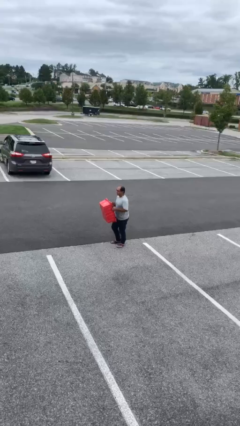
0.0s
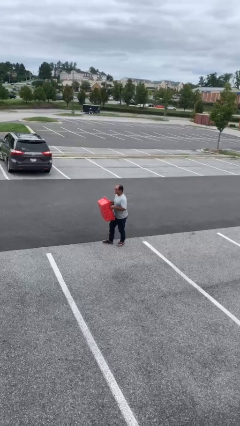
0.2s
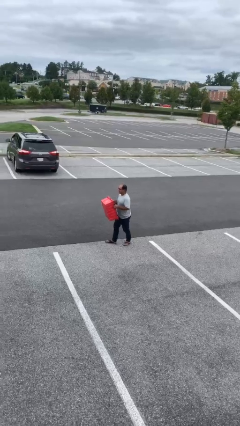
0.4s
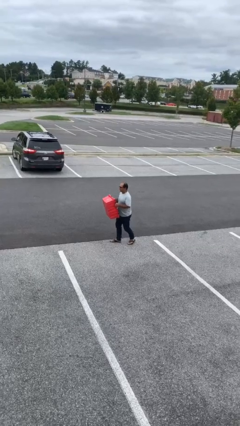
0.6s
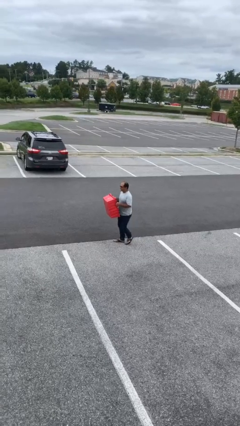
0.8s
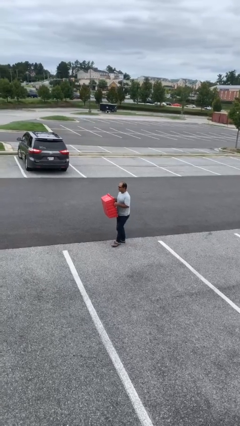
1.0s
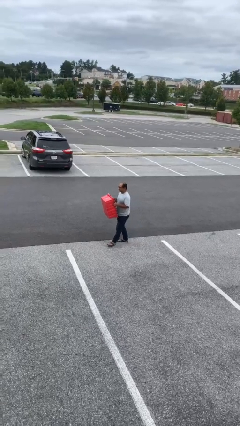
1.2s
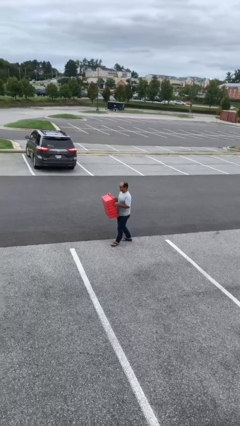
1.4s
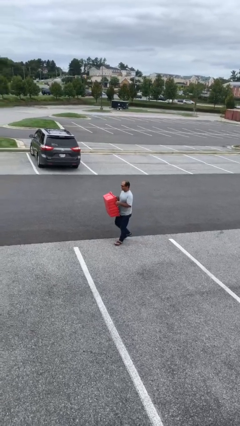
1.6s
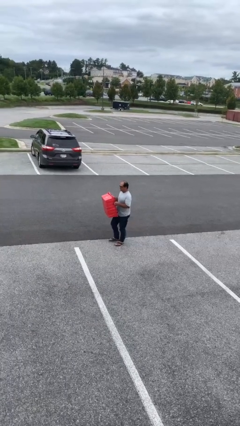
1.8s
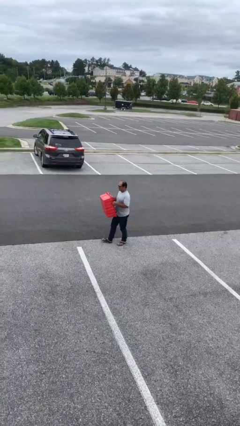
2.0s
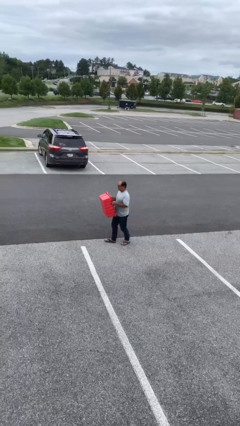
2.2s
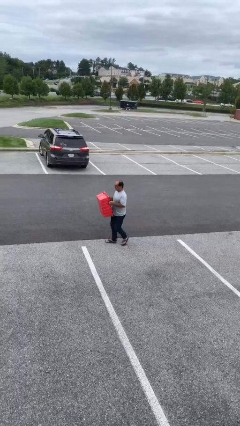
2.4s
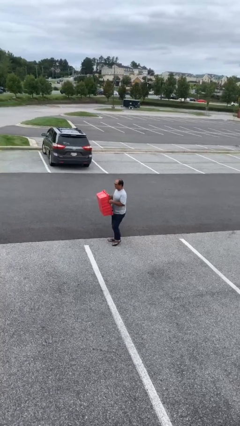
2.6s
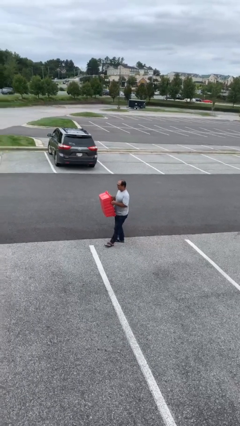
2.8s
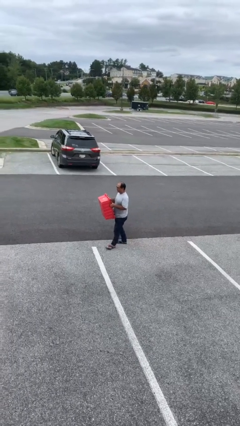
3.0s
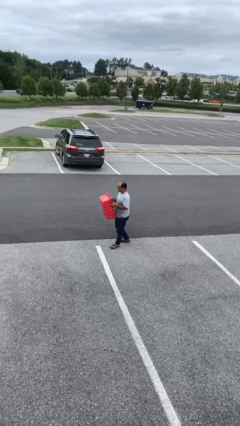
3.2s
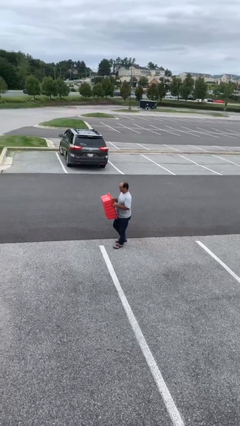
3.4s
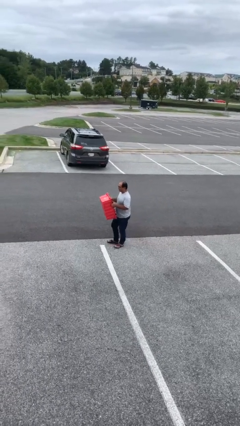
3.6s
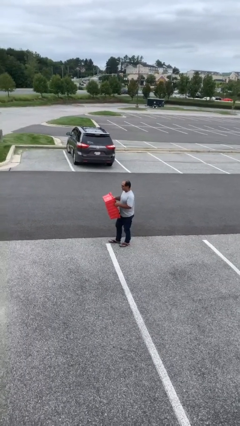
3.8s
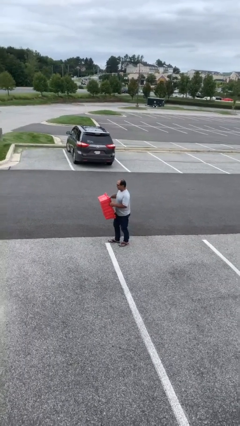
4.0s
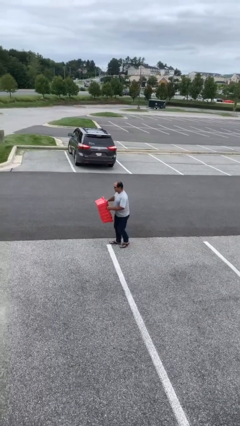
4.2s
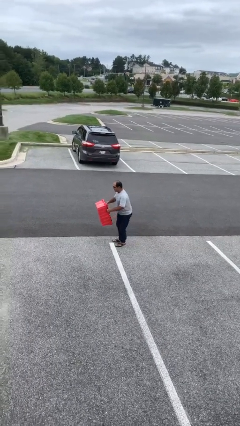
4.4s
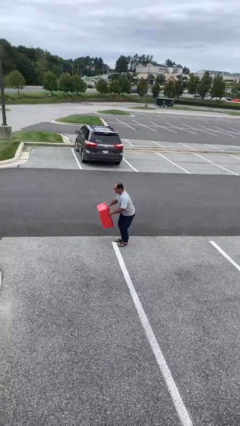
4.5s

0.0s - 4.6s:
person carries heavy object

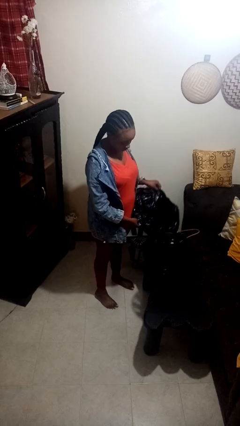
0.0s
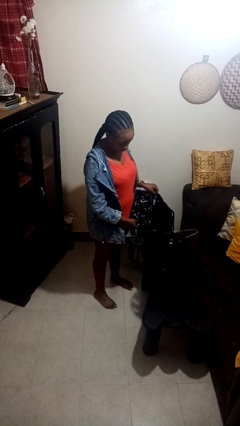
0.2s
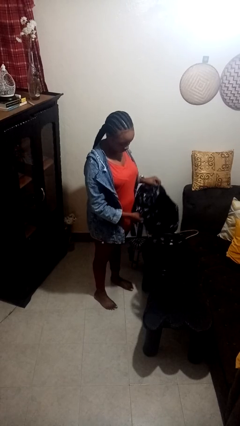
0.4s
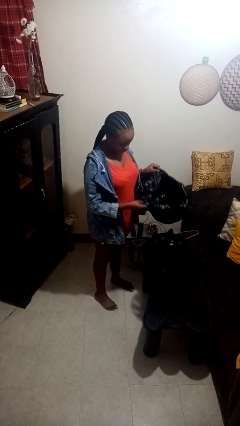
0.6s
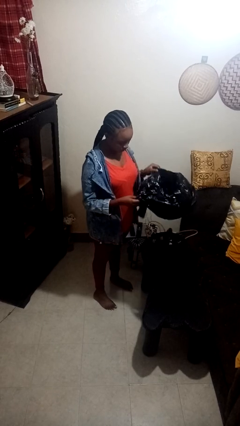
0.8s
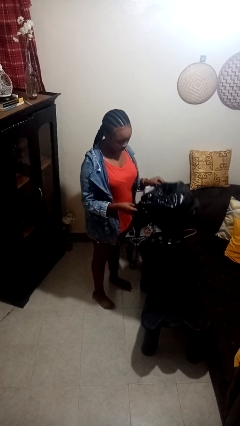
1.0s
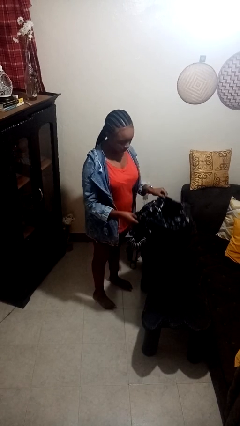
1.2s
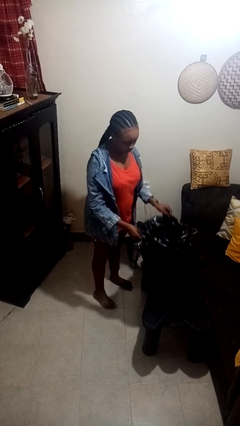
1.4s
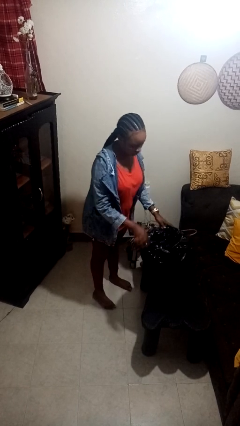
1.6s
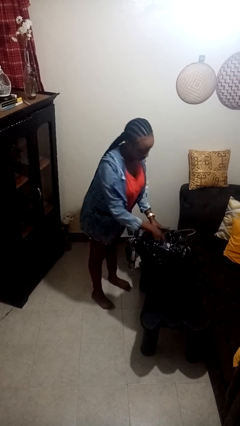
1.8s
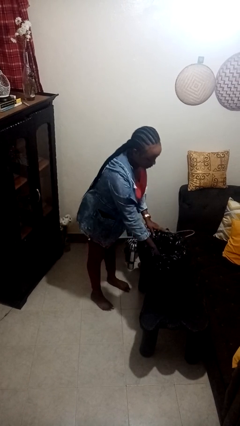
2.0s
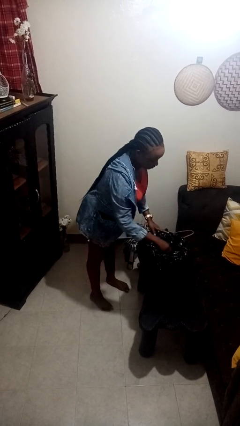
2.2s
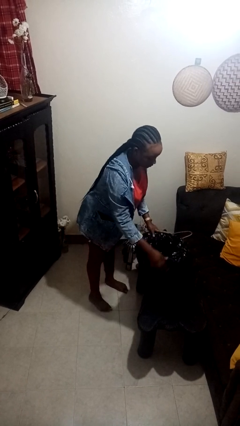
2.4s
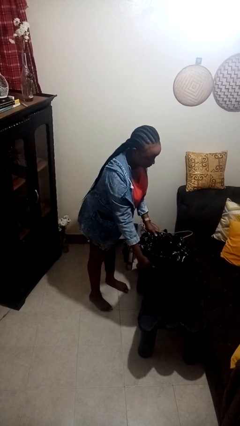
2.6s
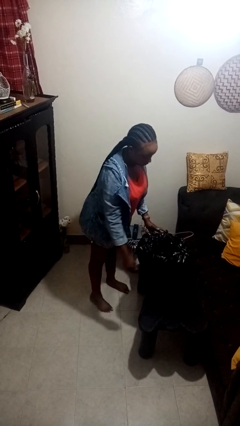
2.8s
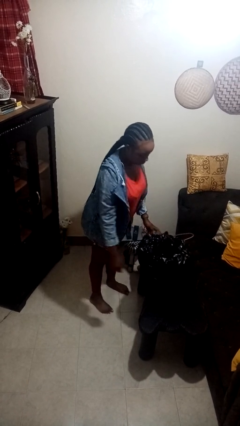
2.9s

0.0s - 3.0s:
person inserts trashbag into trashcan

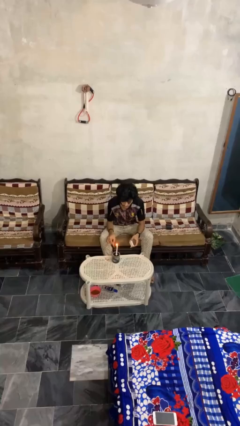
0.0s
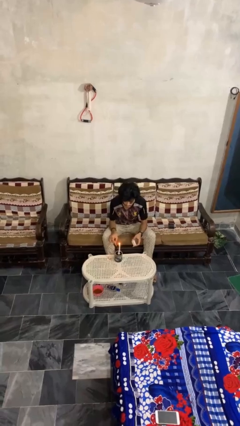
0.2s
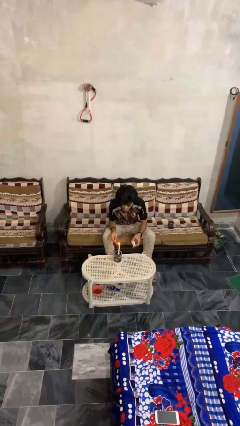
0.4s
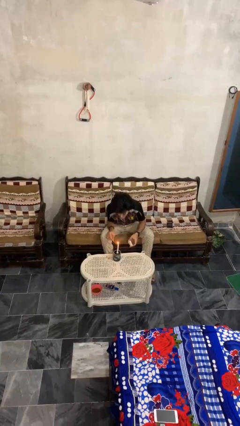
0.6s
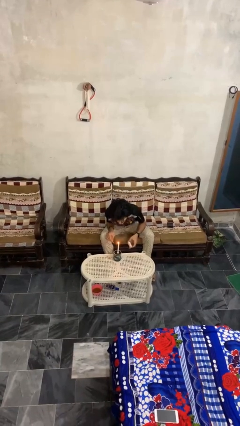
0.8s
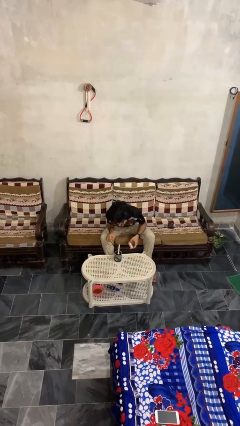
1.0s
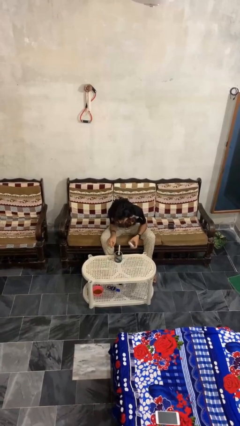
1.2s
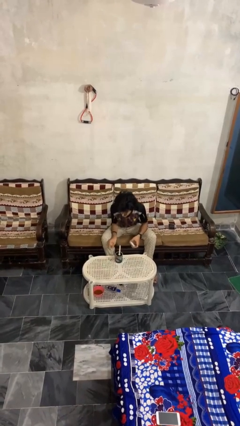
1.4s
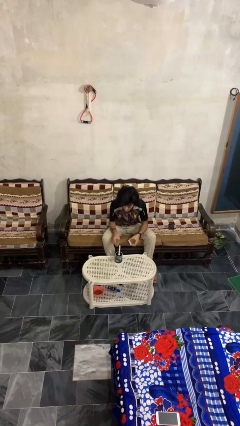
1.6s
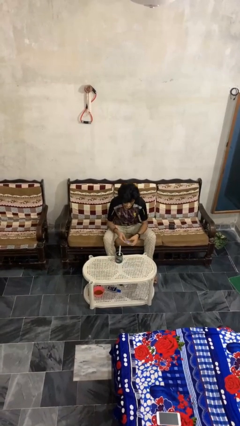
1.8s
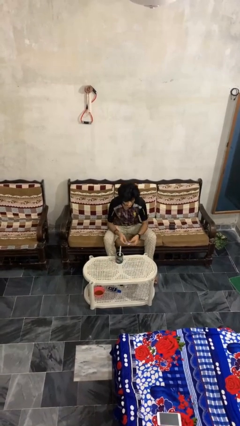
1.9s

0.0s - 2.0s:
person extinguishes candle

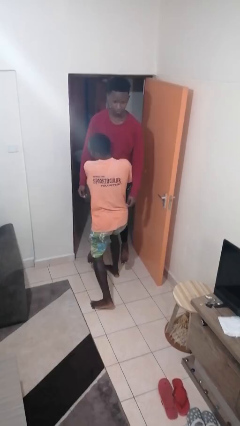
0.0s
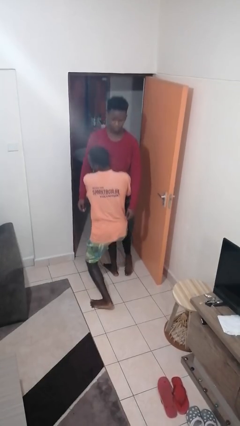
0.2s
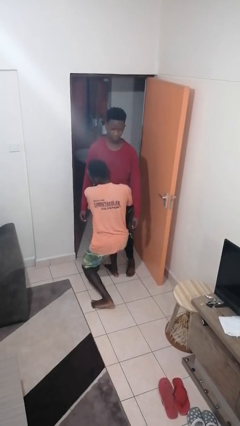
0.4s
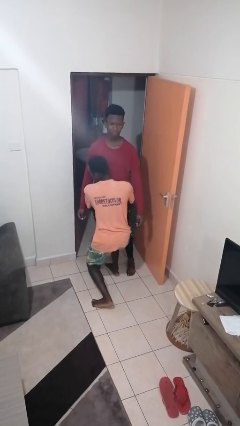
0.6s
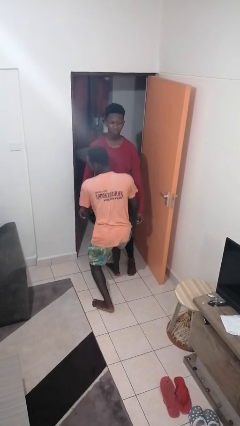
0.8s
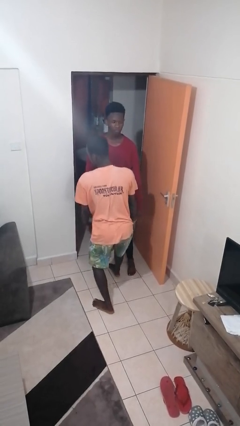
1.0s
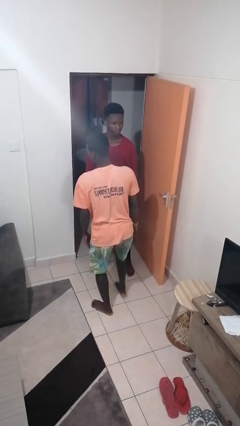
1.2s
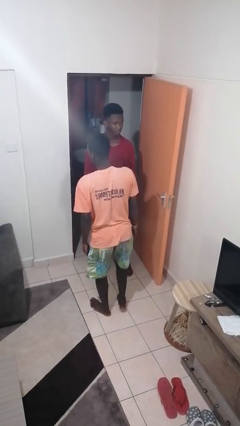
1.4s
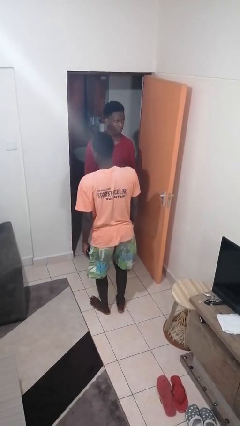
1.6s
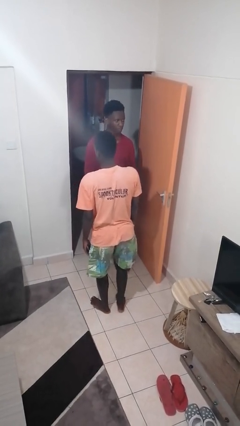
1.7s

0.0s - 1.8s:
person puts down person

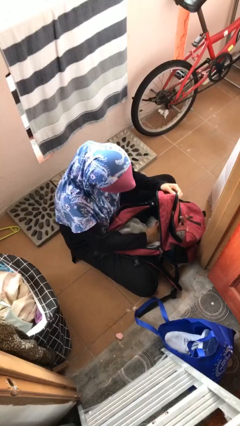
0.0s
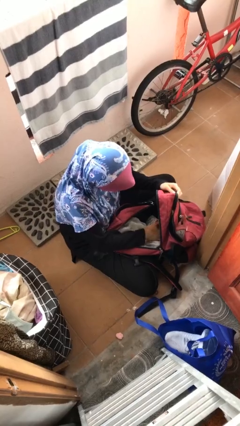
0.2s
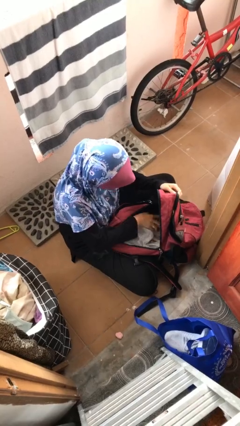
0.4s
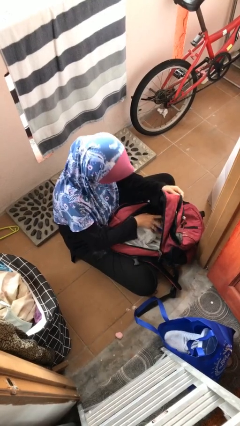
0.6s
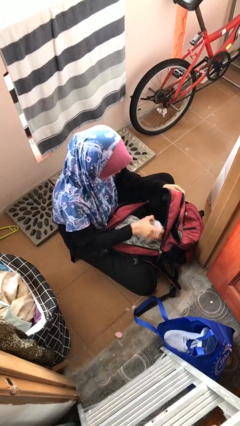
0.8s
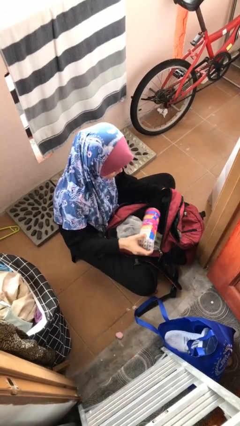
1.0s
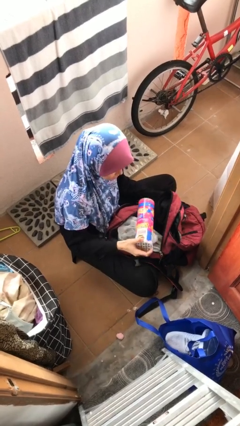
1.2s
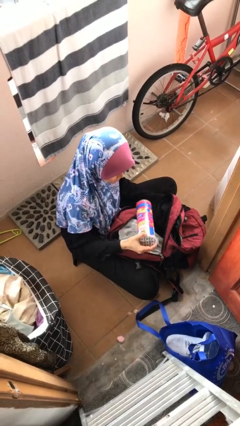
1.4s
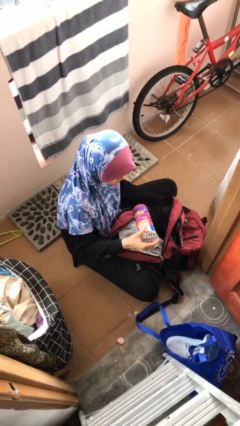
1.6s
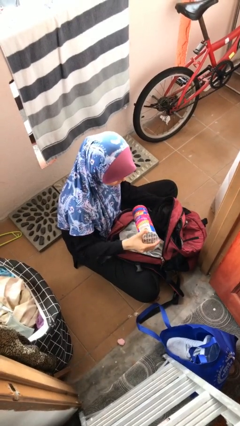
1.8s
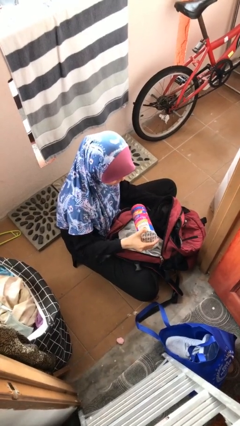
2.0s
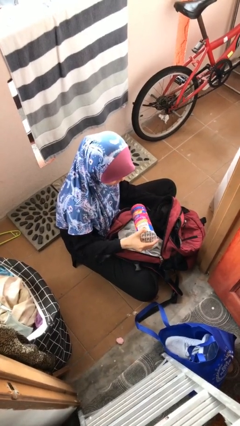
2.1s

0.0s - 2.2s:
person takes object from backpack

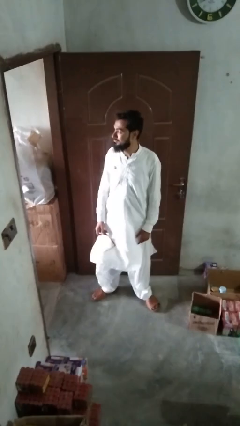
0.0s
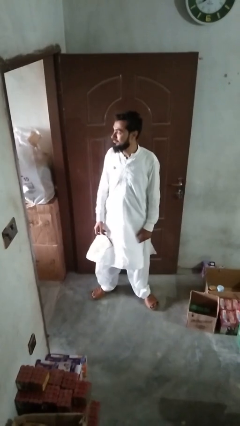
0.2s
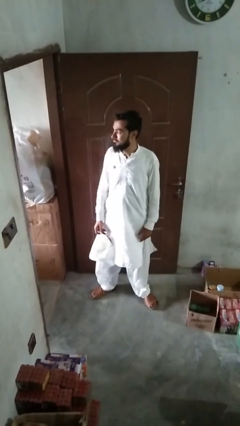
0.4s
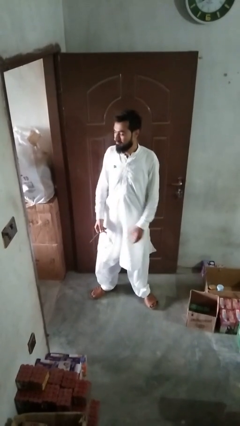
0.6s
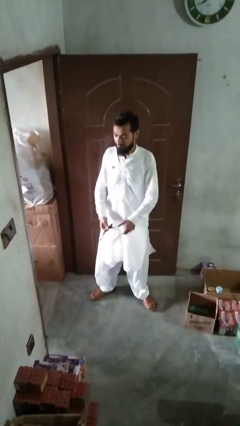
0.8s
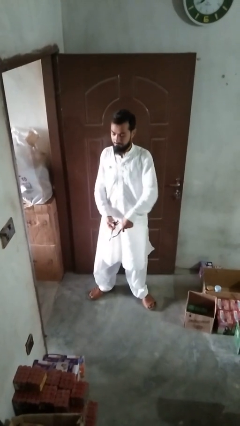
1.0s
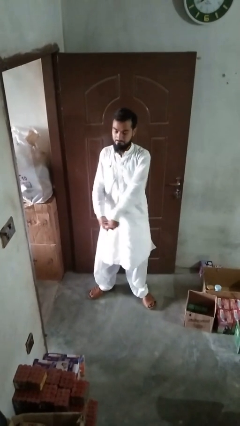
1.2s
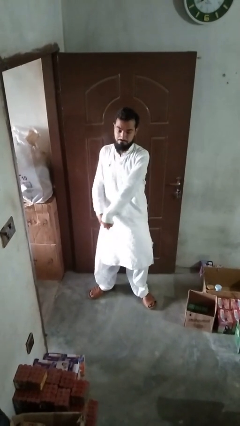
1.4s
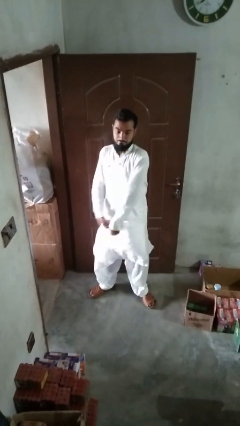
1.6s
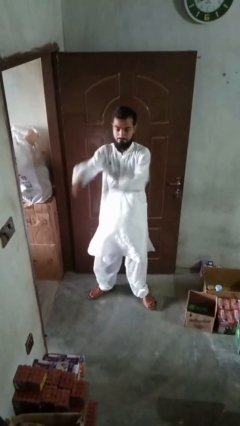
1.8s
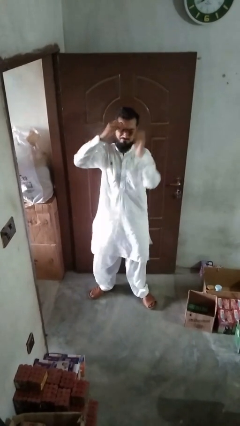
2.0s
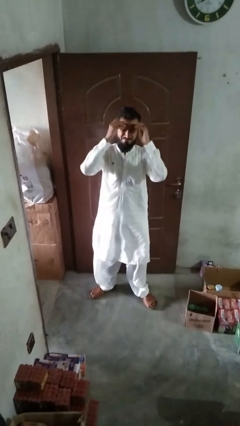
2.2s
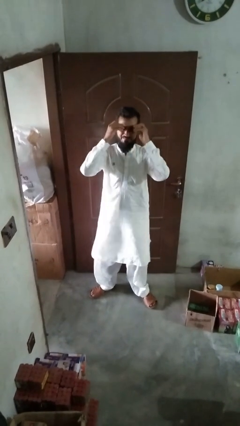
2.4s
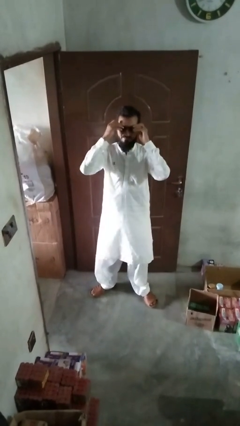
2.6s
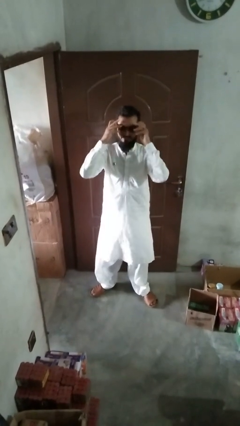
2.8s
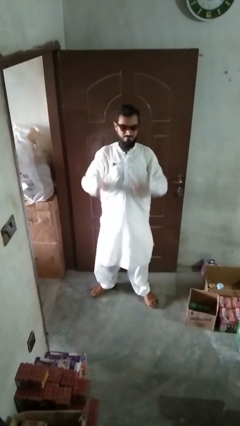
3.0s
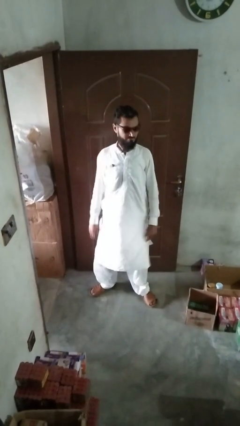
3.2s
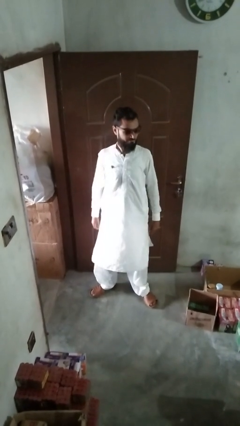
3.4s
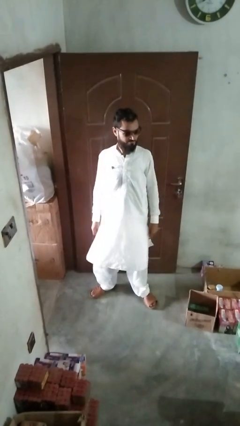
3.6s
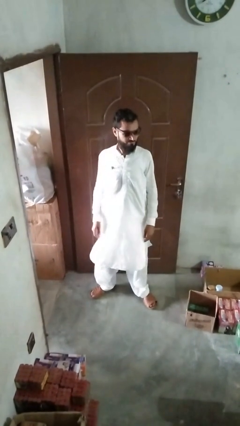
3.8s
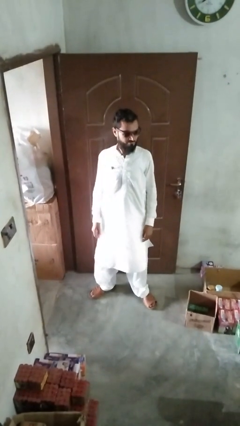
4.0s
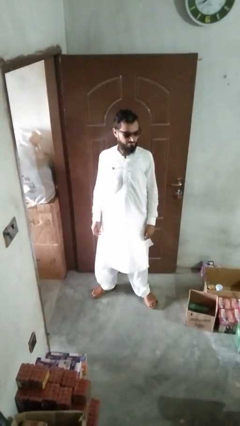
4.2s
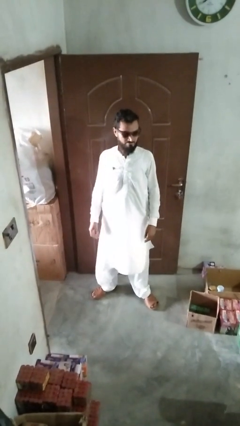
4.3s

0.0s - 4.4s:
person puts on sunglasses
